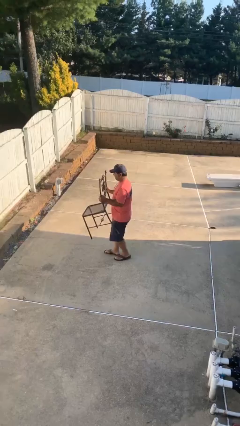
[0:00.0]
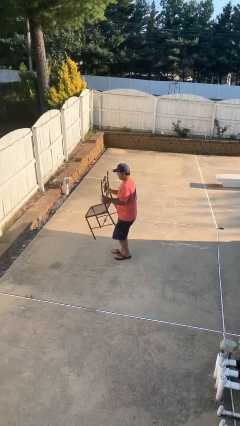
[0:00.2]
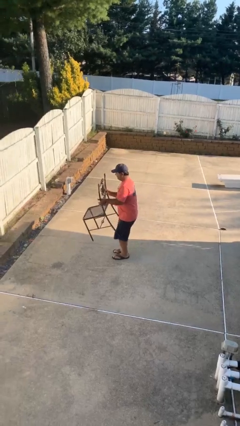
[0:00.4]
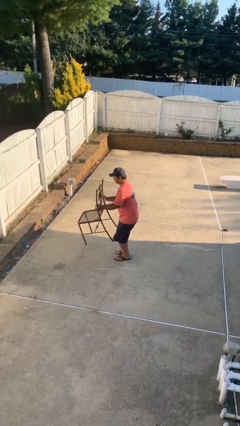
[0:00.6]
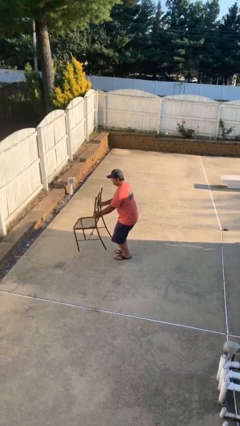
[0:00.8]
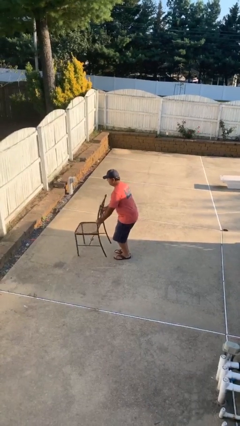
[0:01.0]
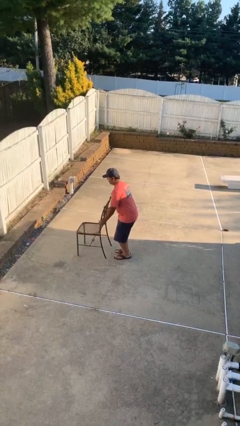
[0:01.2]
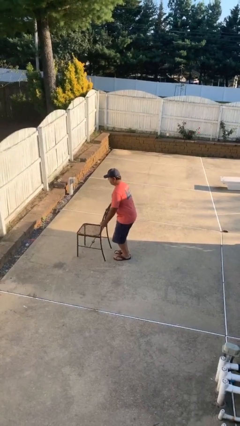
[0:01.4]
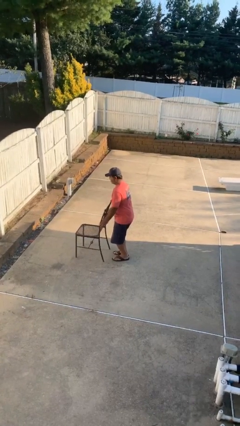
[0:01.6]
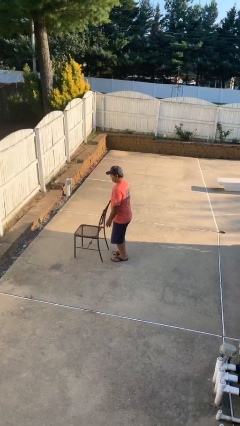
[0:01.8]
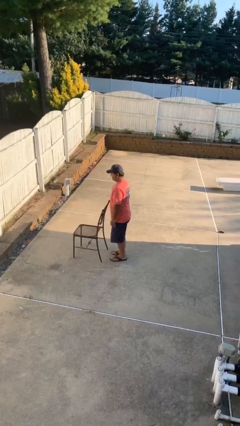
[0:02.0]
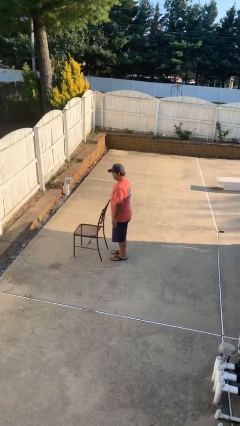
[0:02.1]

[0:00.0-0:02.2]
person puts down object on floor

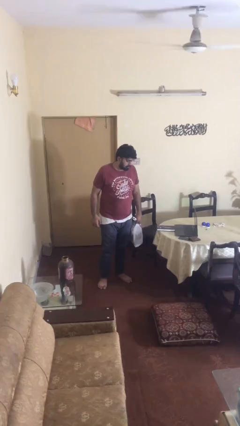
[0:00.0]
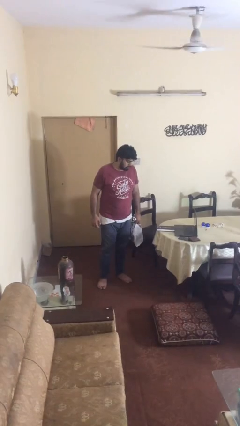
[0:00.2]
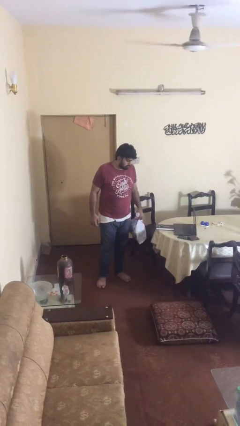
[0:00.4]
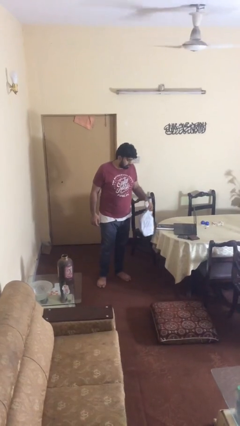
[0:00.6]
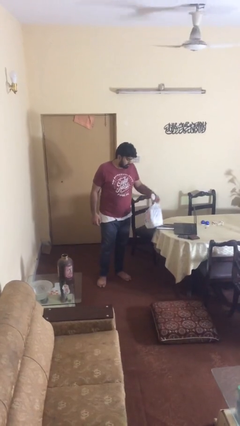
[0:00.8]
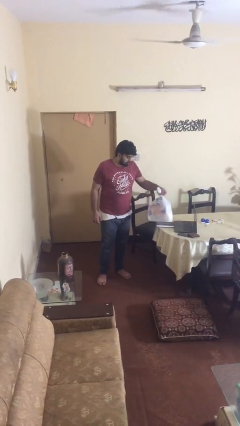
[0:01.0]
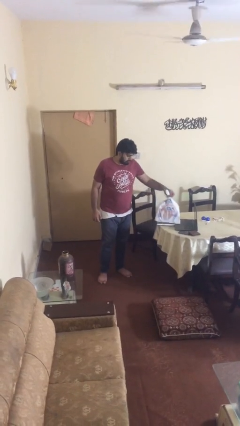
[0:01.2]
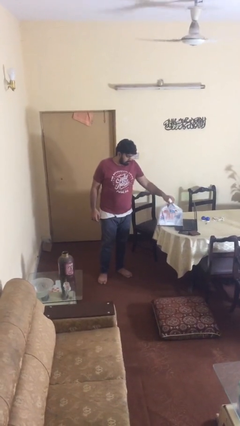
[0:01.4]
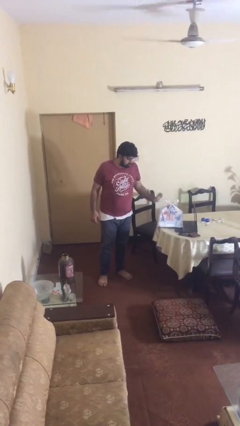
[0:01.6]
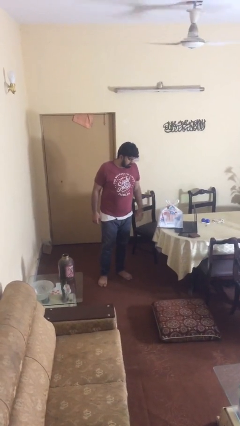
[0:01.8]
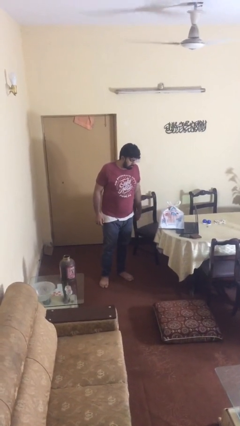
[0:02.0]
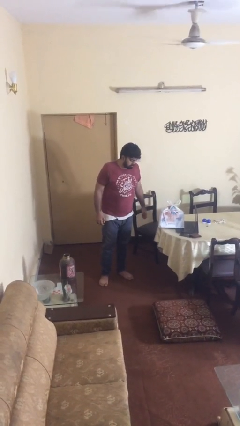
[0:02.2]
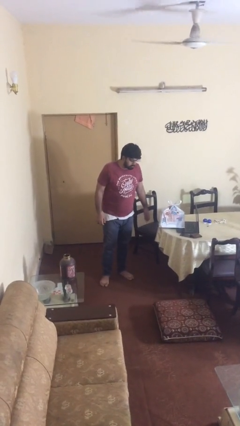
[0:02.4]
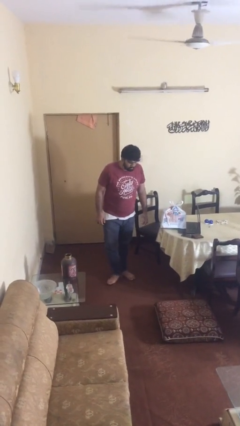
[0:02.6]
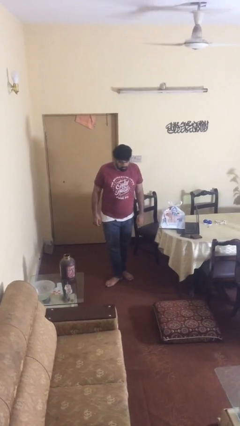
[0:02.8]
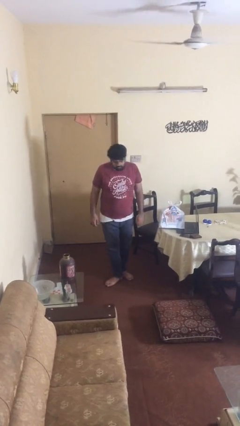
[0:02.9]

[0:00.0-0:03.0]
person puts down object on table

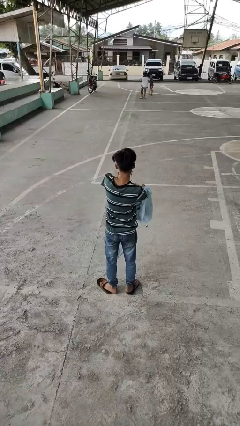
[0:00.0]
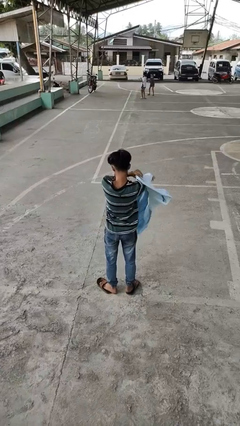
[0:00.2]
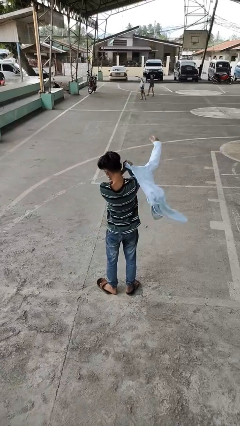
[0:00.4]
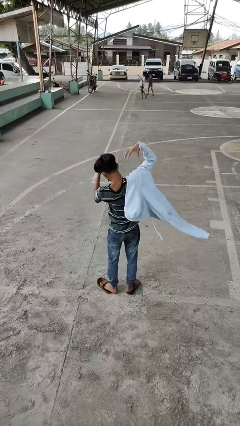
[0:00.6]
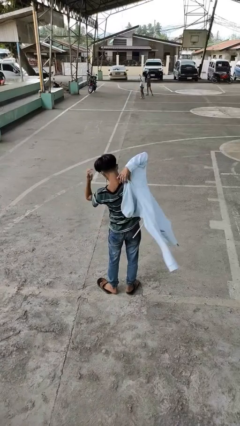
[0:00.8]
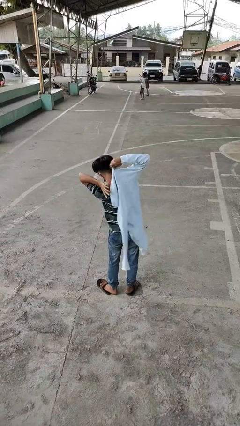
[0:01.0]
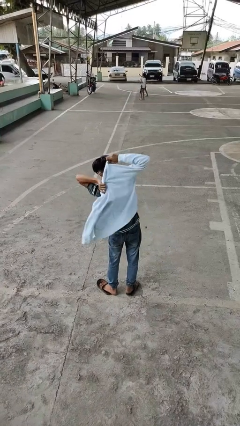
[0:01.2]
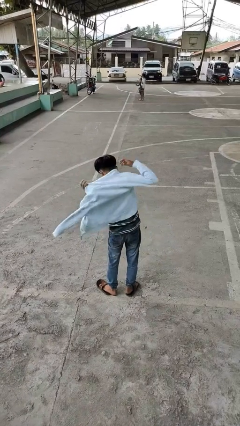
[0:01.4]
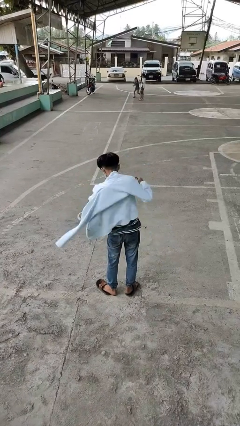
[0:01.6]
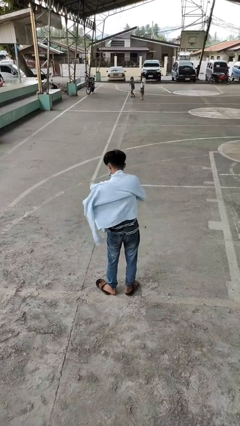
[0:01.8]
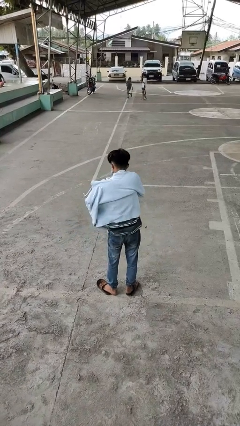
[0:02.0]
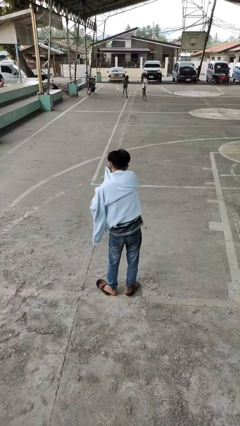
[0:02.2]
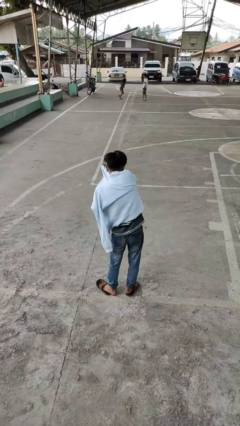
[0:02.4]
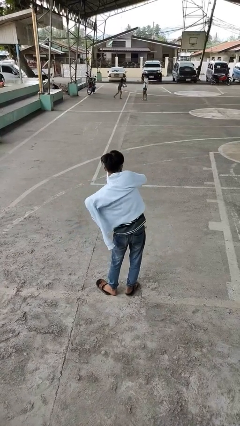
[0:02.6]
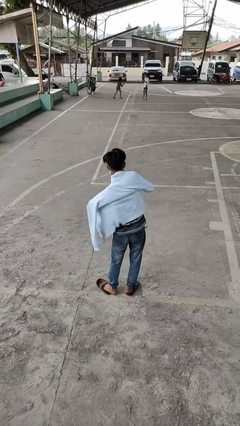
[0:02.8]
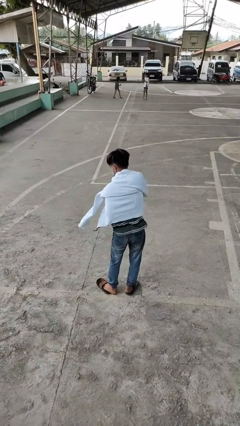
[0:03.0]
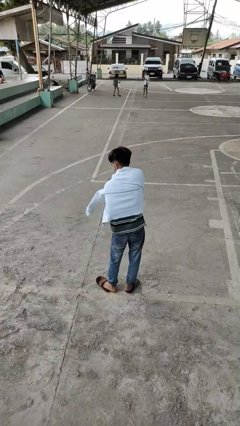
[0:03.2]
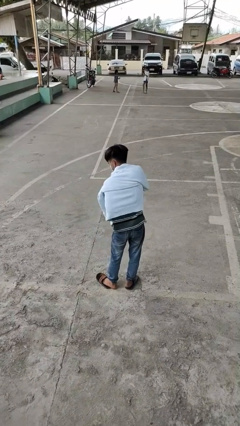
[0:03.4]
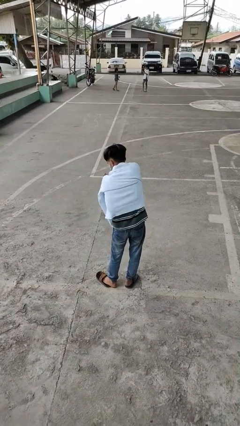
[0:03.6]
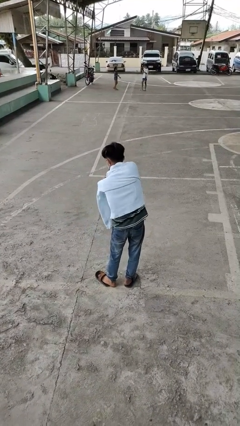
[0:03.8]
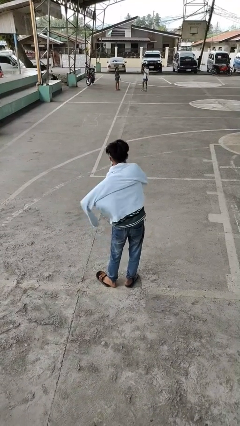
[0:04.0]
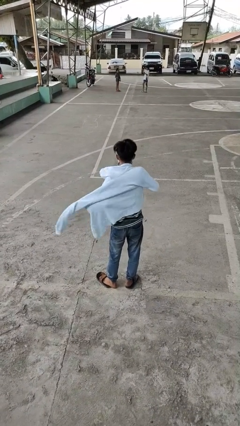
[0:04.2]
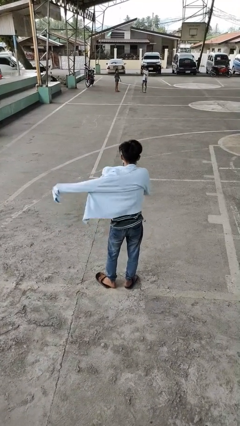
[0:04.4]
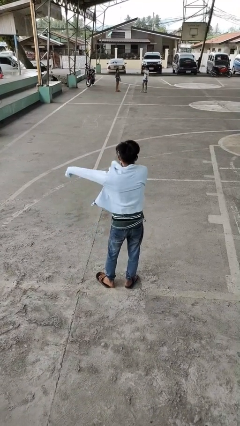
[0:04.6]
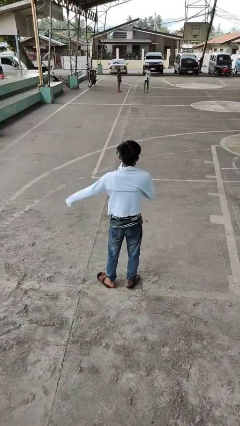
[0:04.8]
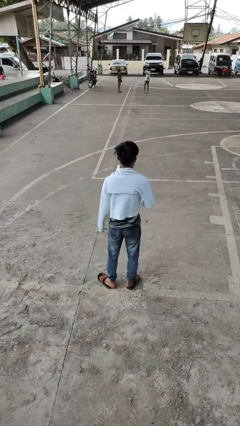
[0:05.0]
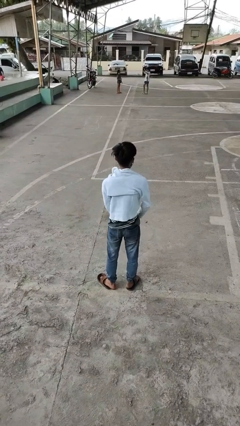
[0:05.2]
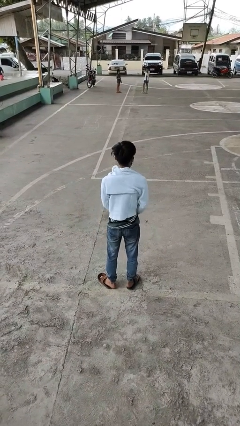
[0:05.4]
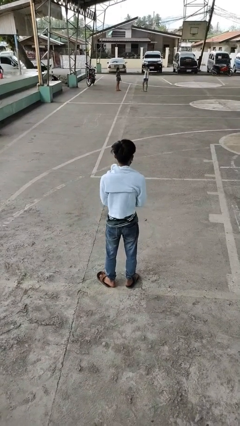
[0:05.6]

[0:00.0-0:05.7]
person puts on jacket

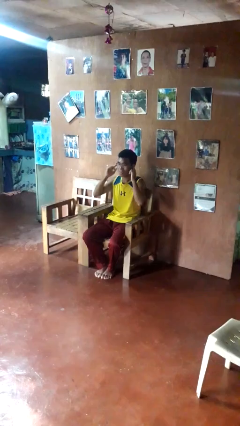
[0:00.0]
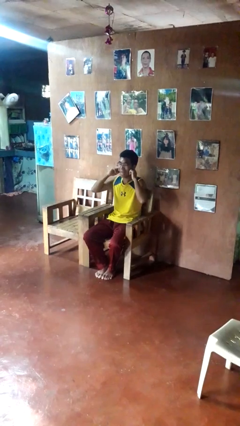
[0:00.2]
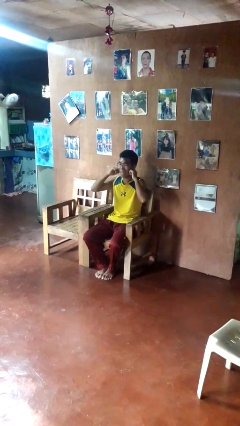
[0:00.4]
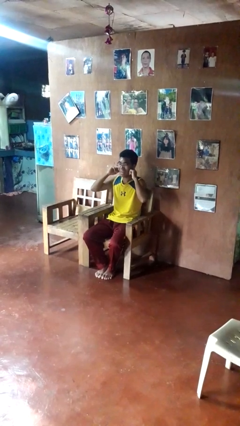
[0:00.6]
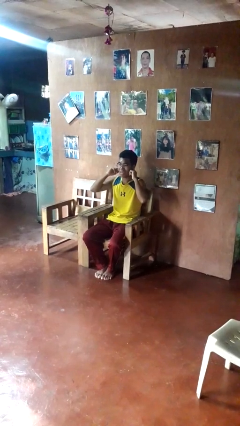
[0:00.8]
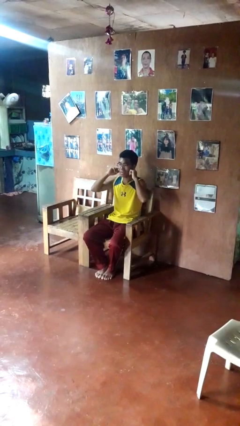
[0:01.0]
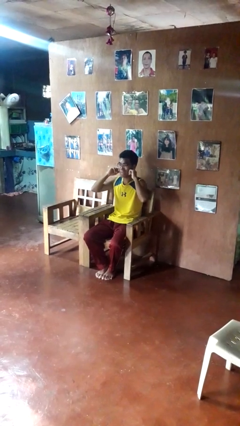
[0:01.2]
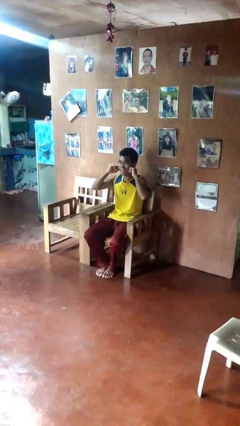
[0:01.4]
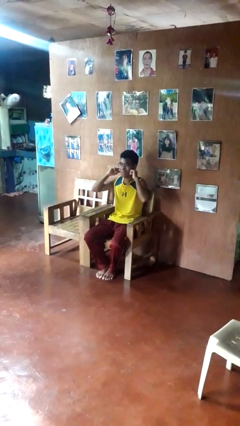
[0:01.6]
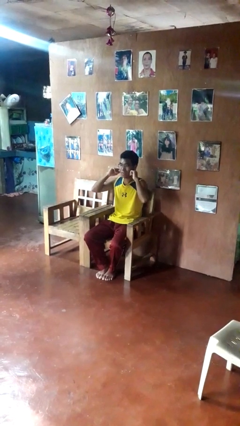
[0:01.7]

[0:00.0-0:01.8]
person puts fingers in ear

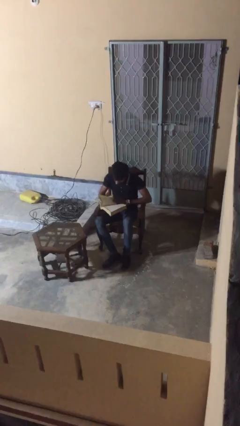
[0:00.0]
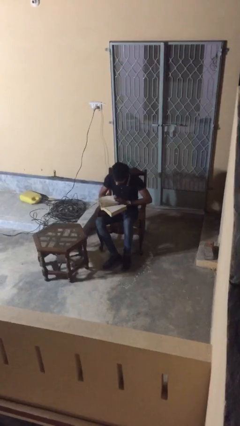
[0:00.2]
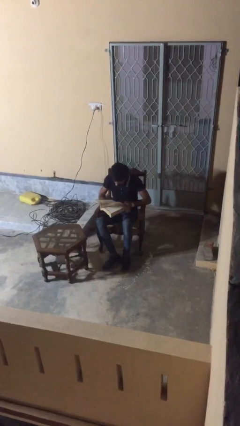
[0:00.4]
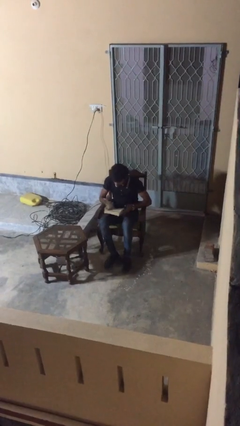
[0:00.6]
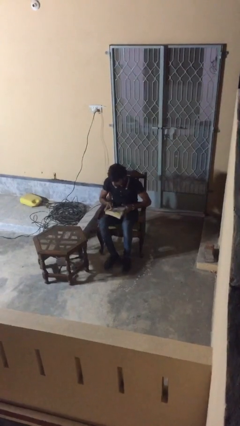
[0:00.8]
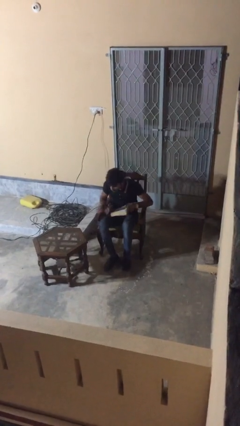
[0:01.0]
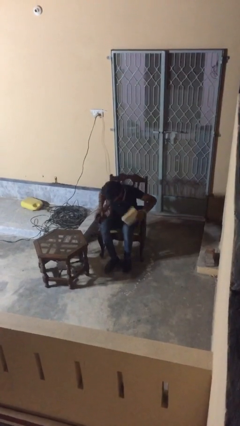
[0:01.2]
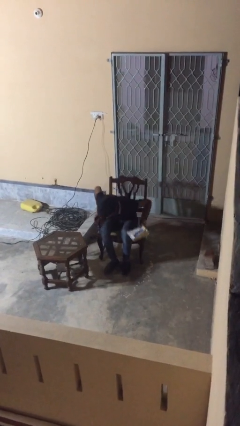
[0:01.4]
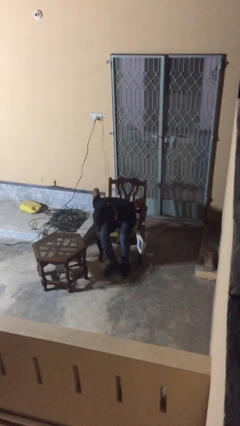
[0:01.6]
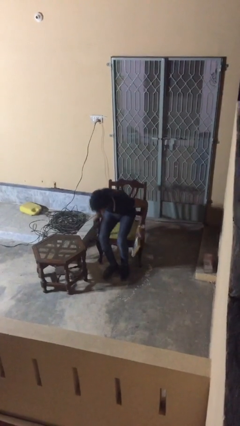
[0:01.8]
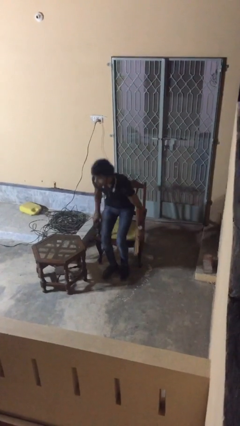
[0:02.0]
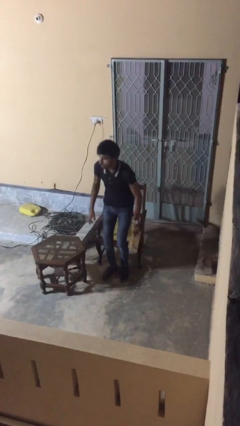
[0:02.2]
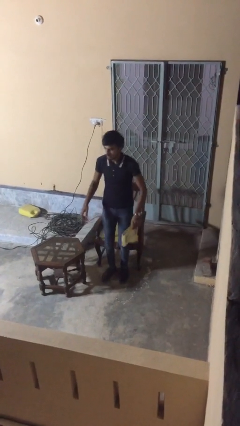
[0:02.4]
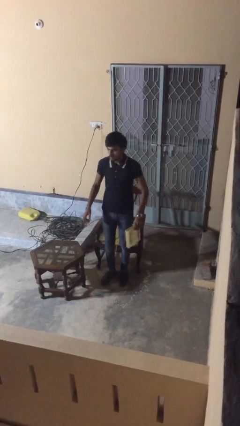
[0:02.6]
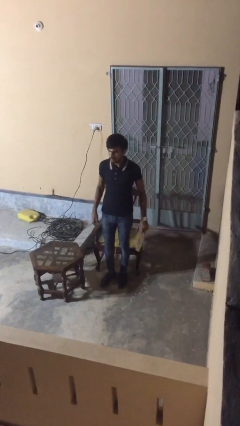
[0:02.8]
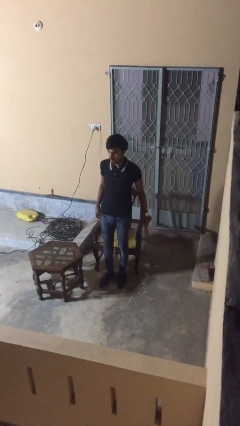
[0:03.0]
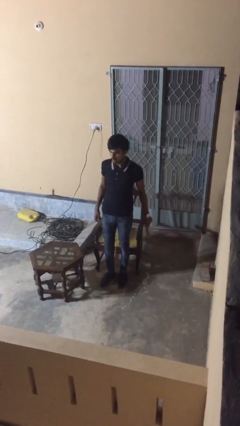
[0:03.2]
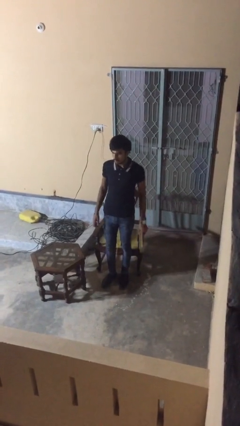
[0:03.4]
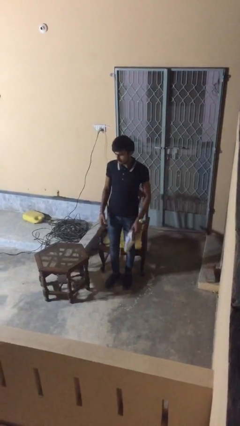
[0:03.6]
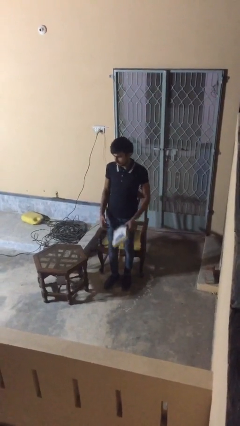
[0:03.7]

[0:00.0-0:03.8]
person stands up

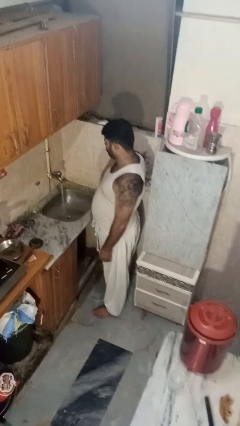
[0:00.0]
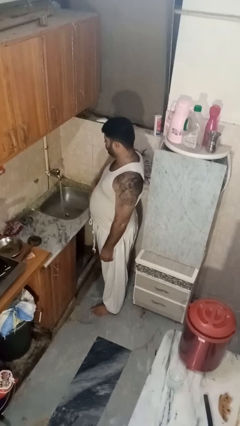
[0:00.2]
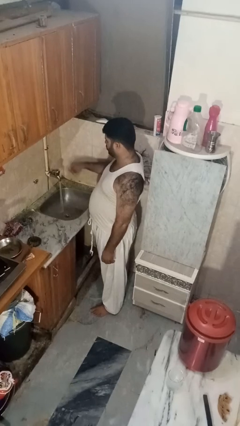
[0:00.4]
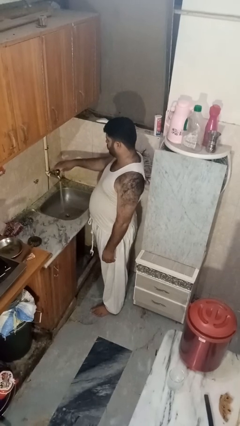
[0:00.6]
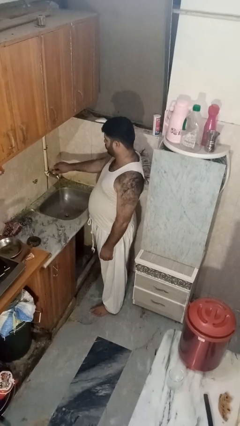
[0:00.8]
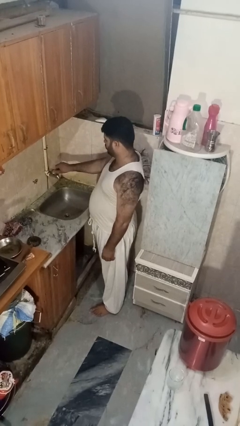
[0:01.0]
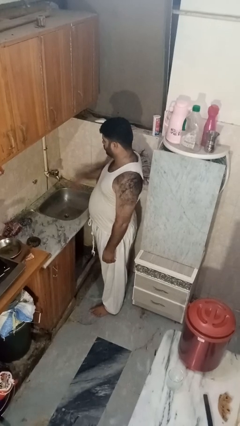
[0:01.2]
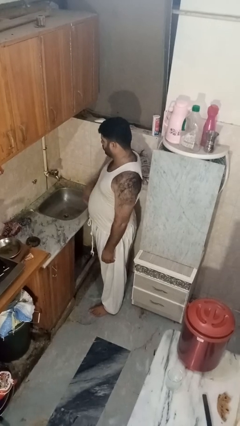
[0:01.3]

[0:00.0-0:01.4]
person turns off faucet
